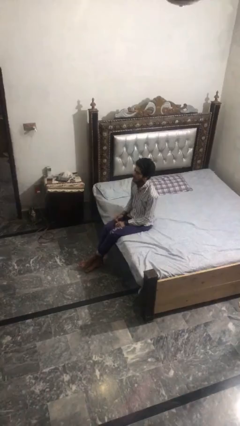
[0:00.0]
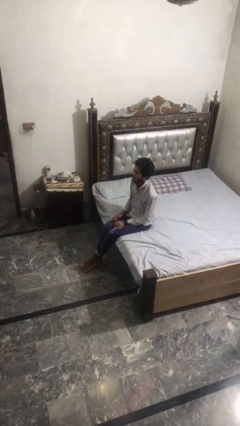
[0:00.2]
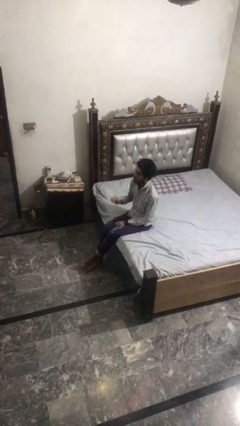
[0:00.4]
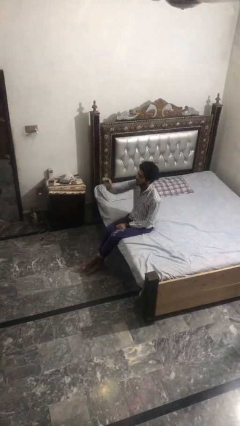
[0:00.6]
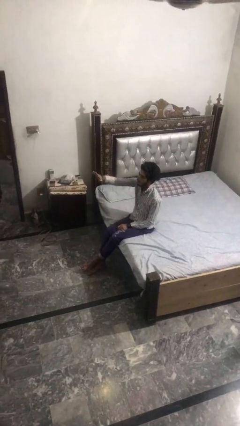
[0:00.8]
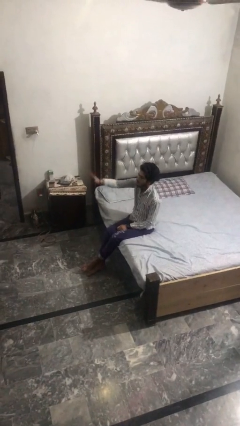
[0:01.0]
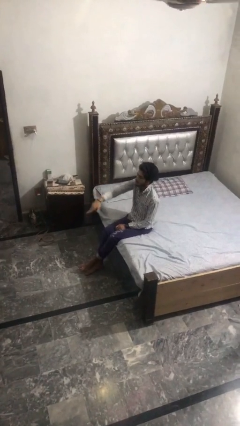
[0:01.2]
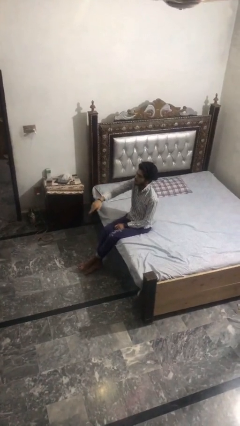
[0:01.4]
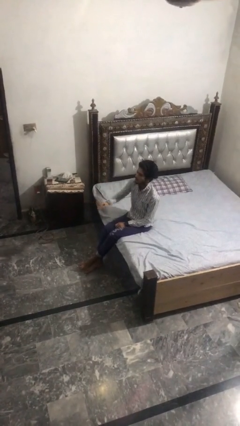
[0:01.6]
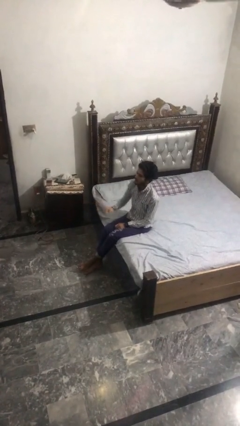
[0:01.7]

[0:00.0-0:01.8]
person gestures swipe down

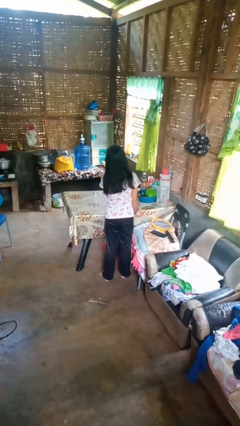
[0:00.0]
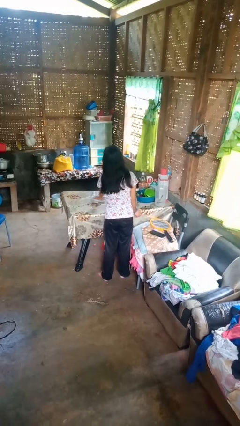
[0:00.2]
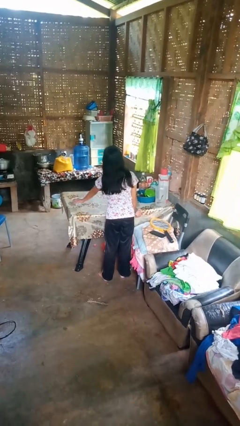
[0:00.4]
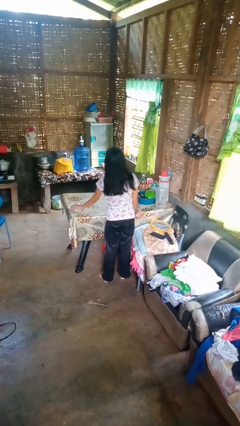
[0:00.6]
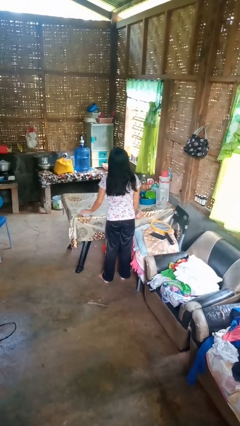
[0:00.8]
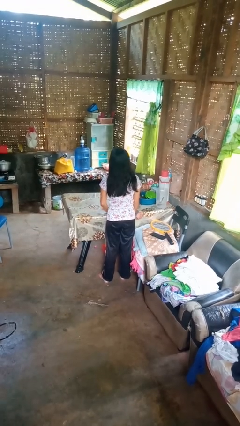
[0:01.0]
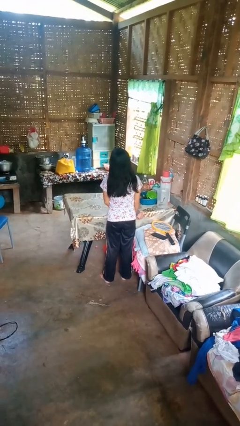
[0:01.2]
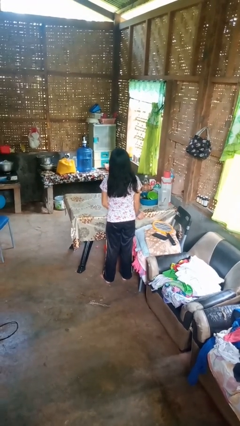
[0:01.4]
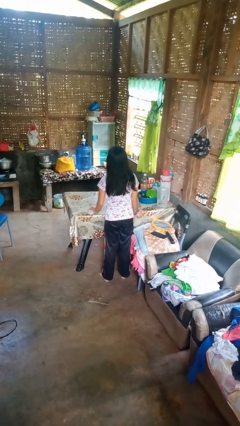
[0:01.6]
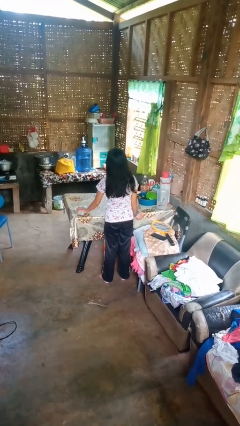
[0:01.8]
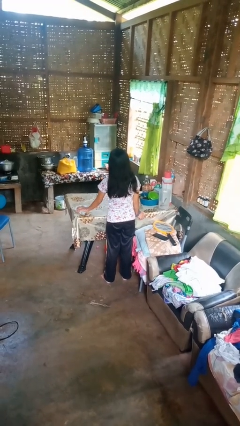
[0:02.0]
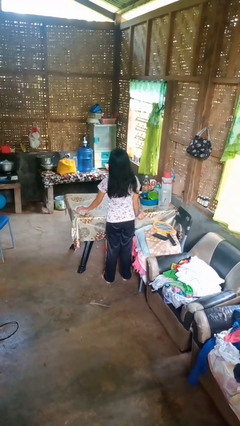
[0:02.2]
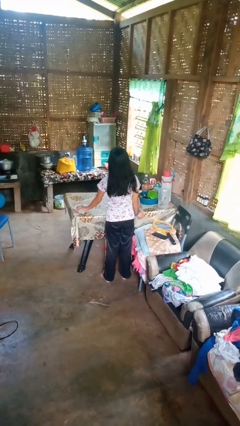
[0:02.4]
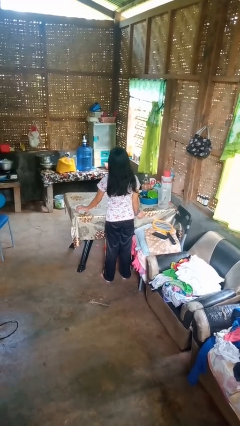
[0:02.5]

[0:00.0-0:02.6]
person cleans table with rag

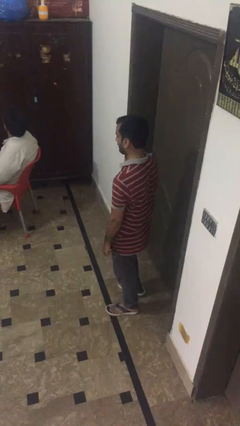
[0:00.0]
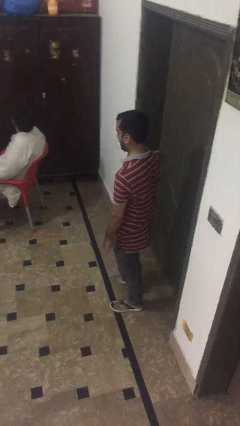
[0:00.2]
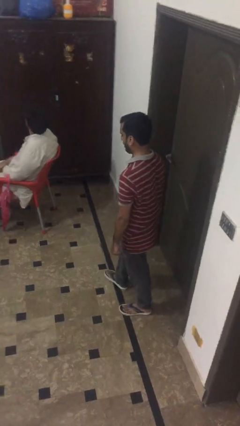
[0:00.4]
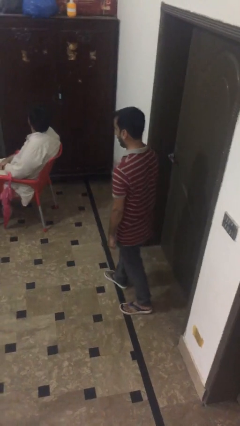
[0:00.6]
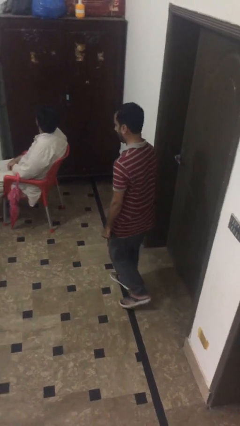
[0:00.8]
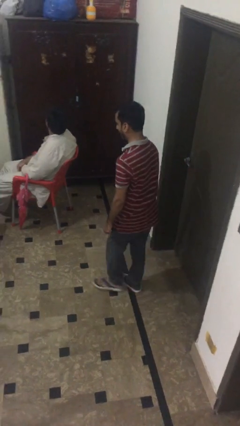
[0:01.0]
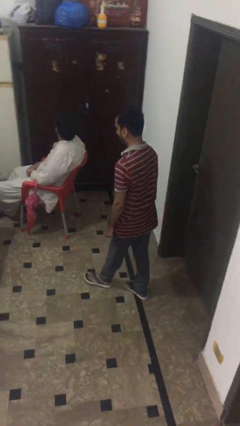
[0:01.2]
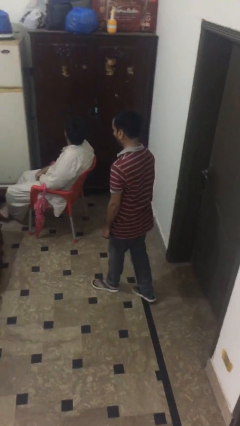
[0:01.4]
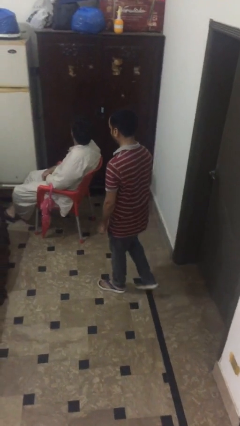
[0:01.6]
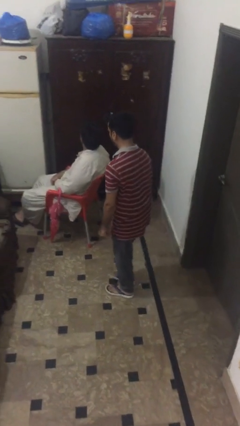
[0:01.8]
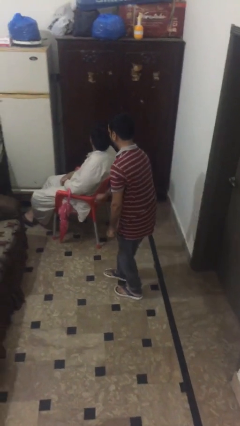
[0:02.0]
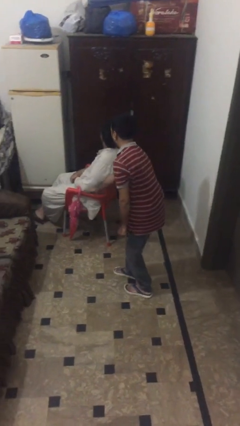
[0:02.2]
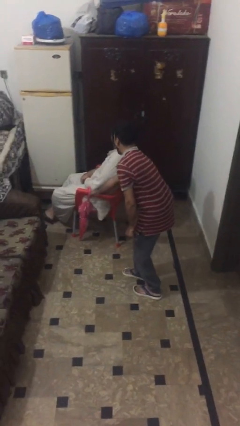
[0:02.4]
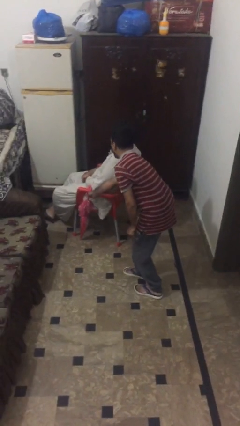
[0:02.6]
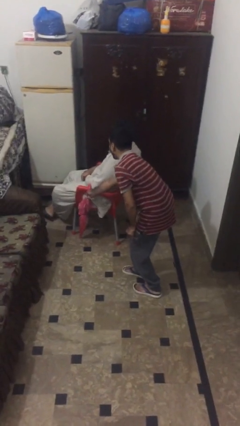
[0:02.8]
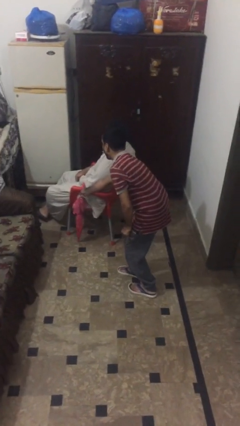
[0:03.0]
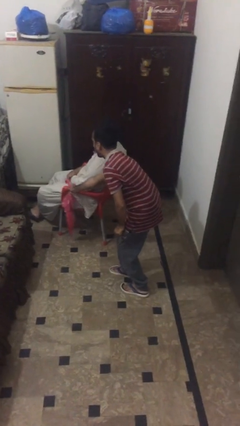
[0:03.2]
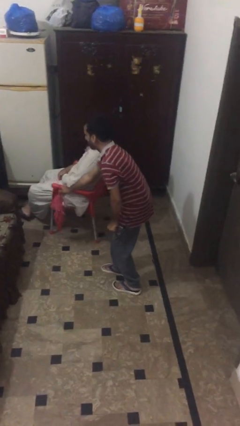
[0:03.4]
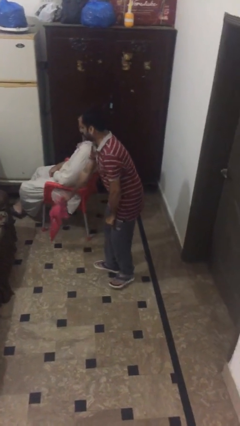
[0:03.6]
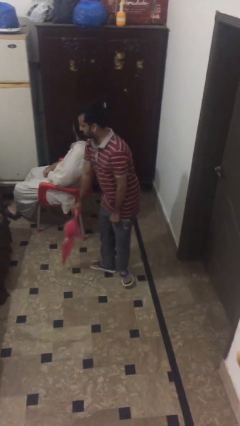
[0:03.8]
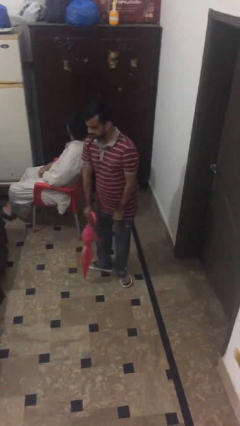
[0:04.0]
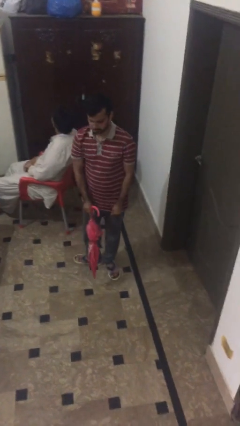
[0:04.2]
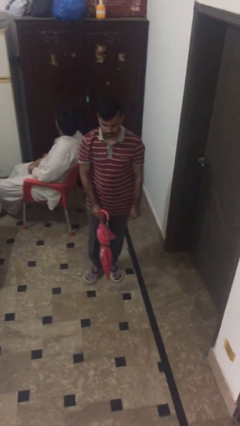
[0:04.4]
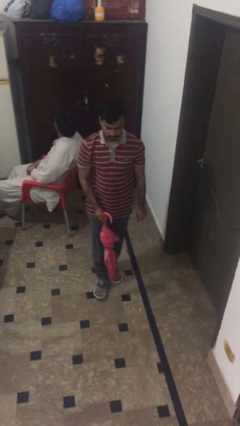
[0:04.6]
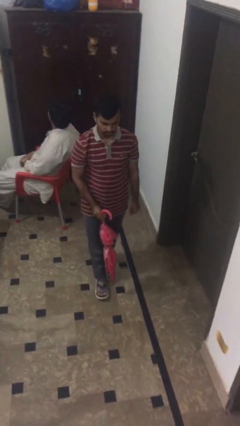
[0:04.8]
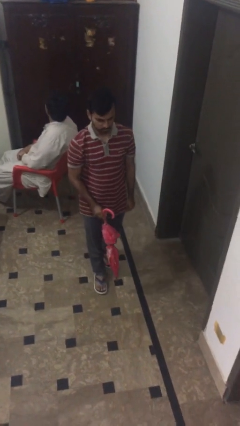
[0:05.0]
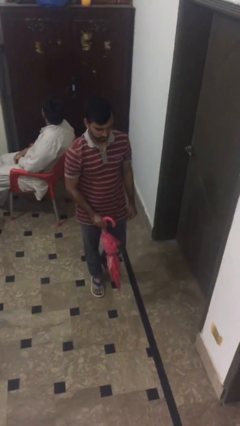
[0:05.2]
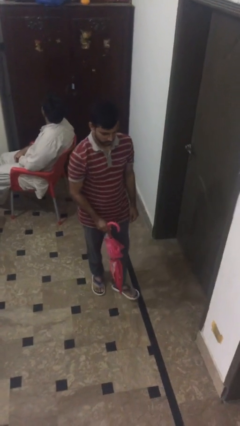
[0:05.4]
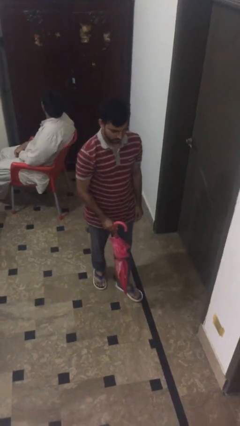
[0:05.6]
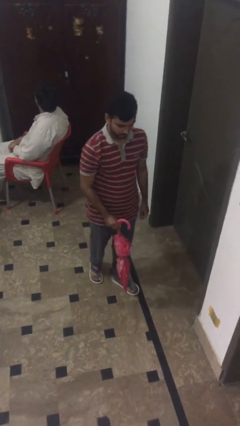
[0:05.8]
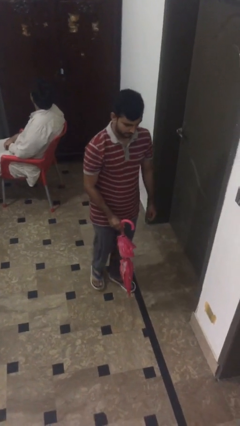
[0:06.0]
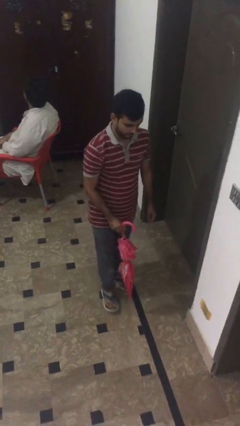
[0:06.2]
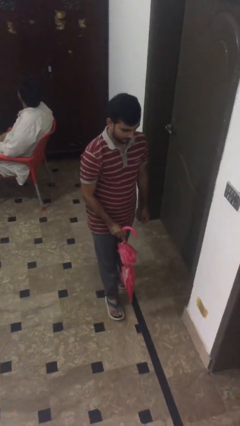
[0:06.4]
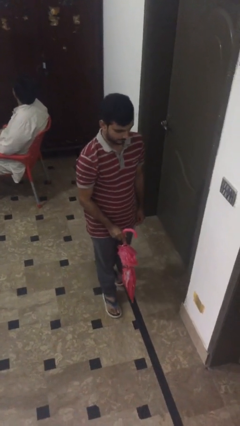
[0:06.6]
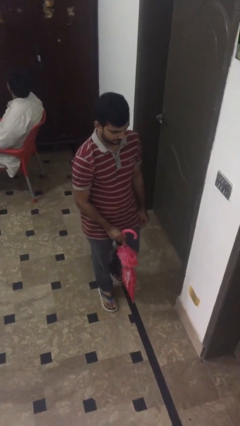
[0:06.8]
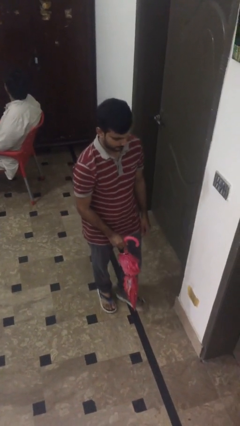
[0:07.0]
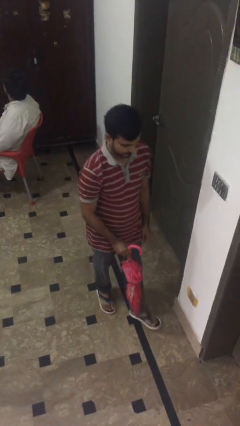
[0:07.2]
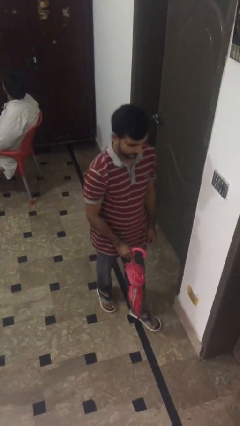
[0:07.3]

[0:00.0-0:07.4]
person steals object from person

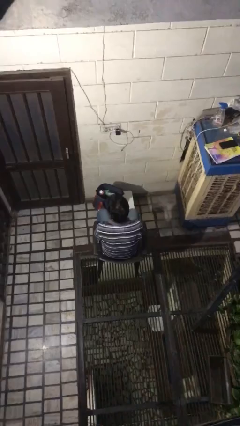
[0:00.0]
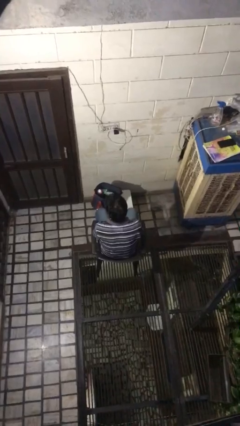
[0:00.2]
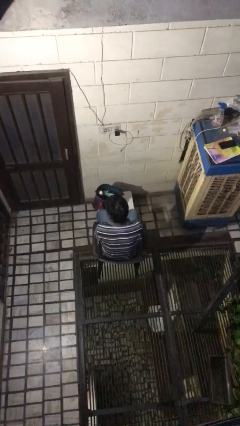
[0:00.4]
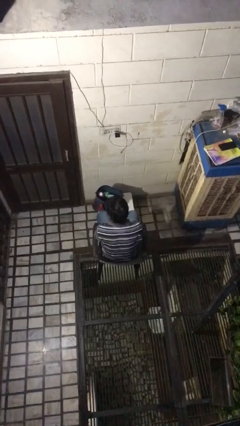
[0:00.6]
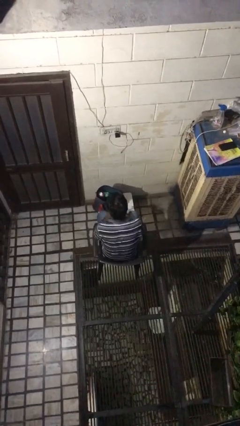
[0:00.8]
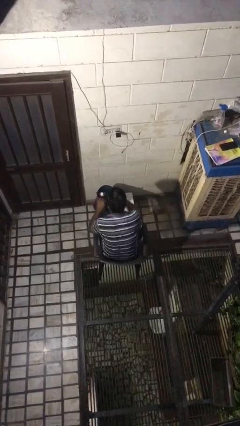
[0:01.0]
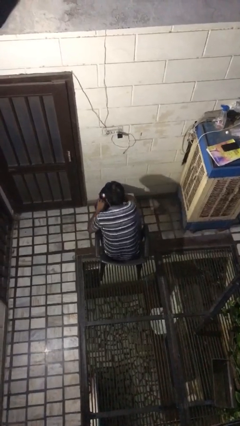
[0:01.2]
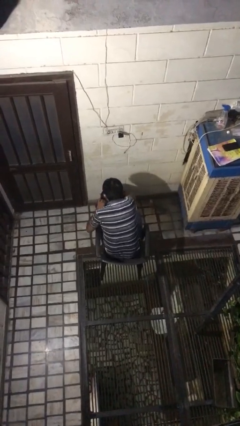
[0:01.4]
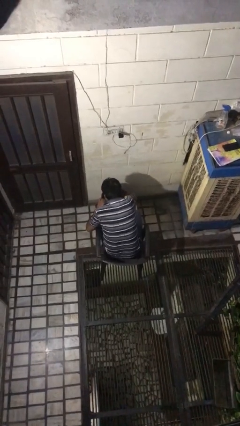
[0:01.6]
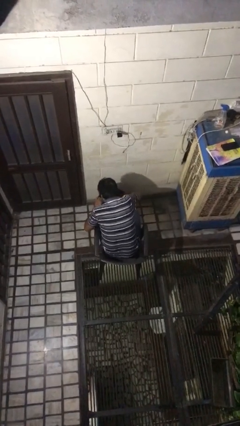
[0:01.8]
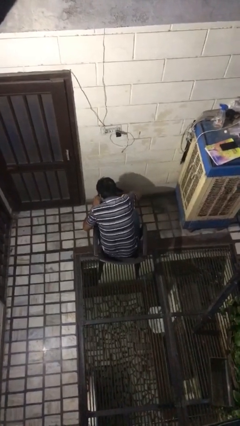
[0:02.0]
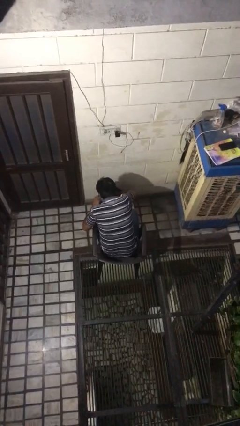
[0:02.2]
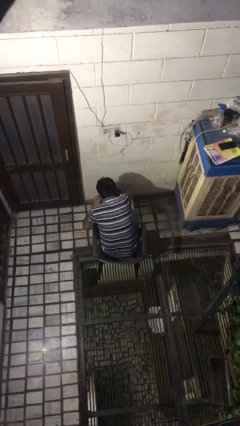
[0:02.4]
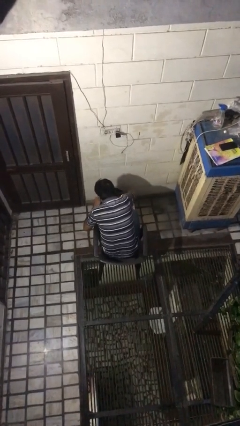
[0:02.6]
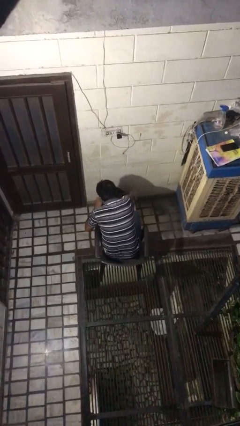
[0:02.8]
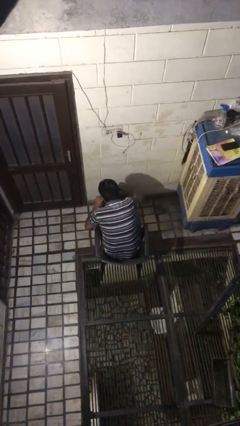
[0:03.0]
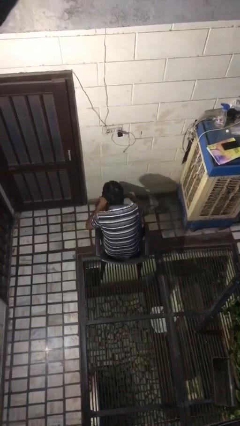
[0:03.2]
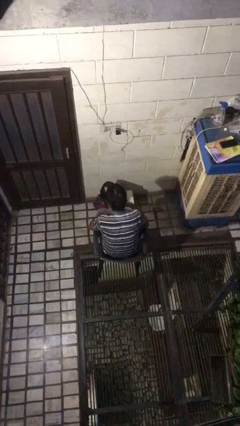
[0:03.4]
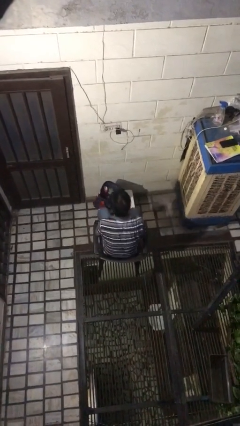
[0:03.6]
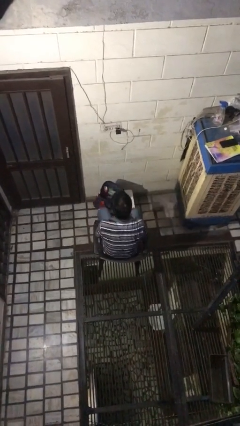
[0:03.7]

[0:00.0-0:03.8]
person searches in bag

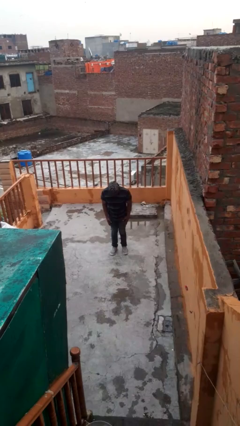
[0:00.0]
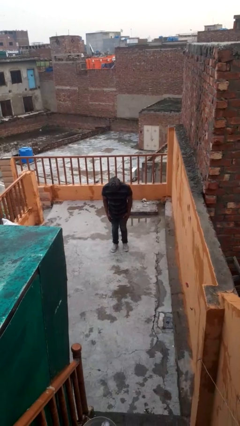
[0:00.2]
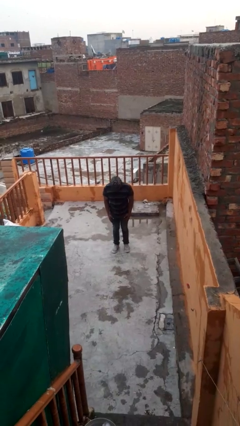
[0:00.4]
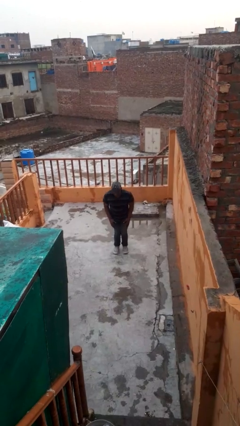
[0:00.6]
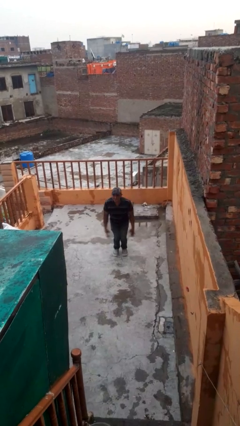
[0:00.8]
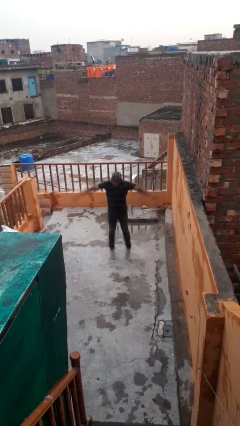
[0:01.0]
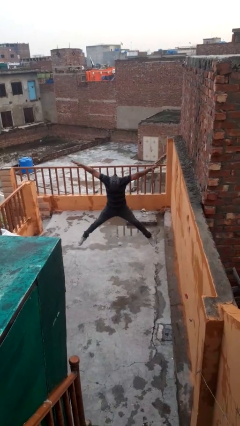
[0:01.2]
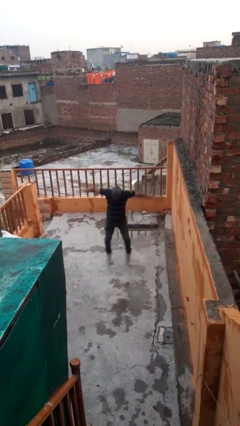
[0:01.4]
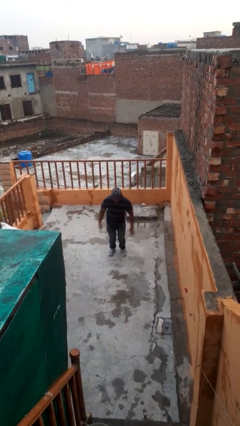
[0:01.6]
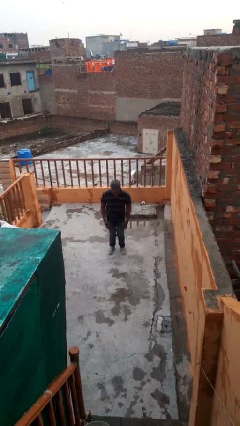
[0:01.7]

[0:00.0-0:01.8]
person exercises with jumping jacks

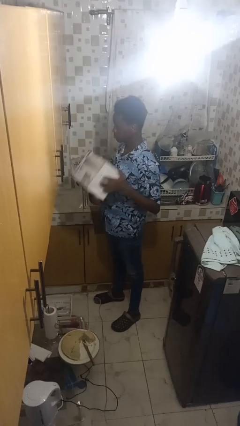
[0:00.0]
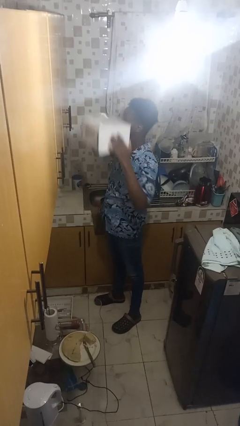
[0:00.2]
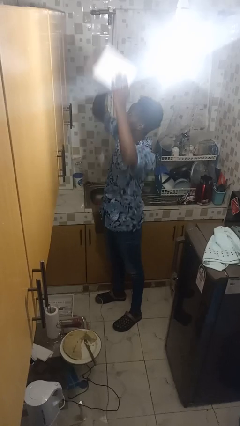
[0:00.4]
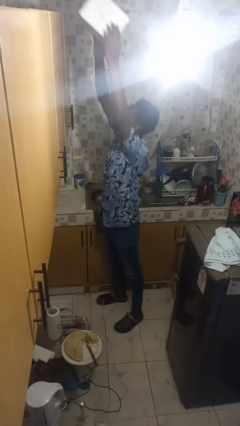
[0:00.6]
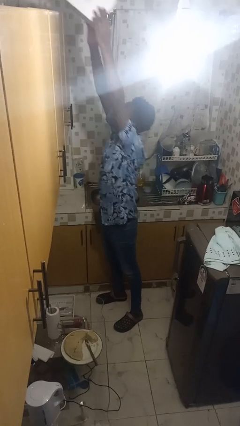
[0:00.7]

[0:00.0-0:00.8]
person puts down object on shelf
